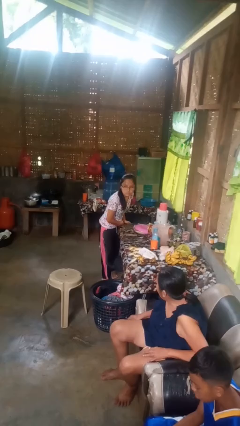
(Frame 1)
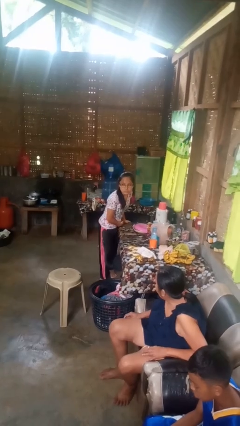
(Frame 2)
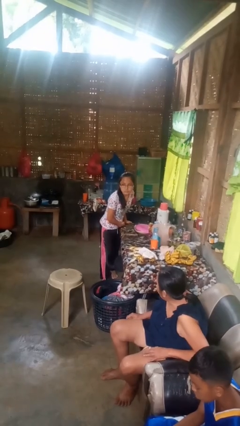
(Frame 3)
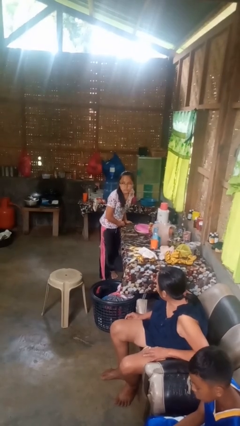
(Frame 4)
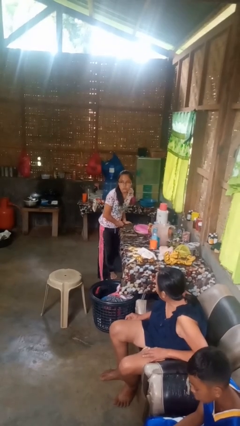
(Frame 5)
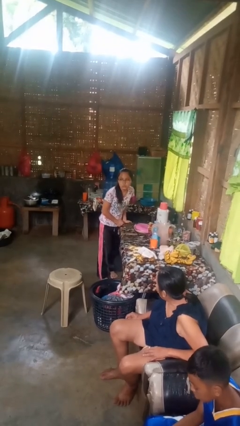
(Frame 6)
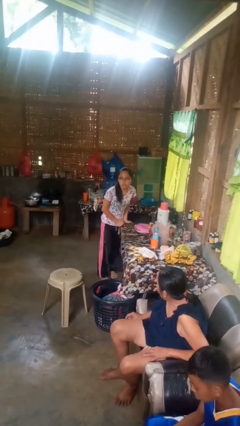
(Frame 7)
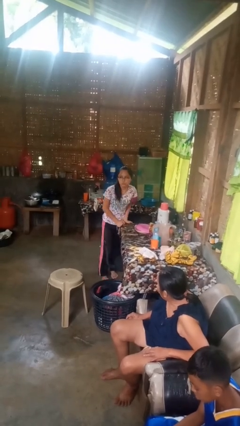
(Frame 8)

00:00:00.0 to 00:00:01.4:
person bumps into table

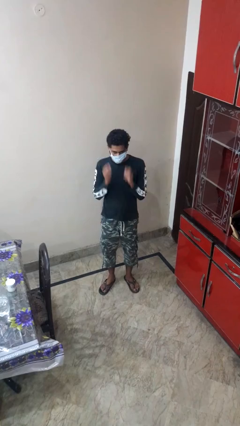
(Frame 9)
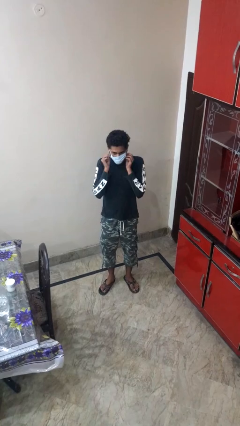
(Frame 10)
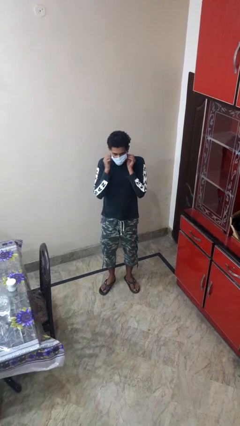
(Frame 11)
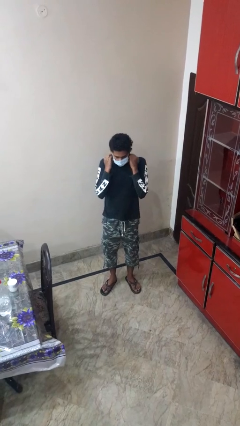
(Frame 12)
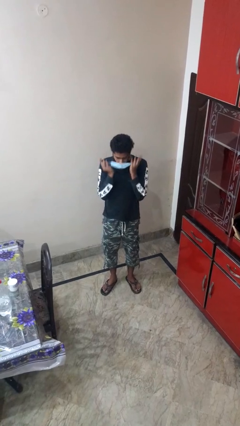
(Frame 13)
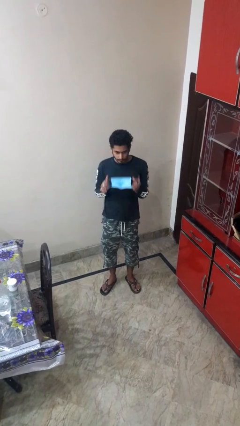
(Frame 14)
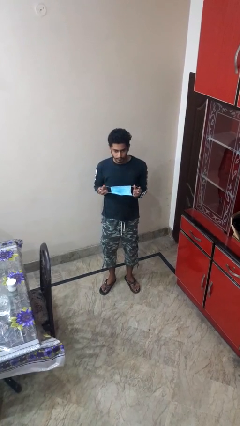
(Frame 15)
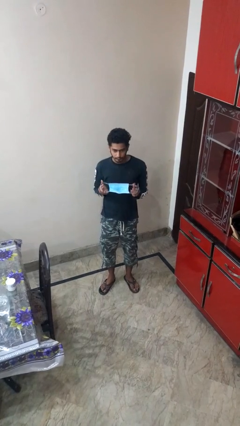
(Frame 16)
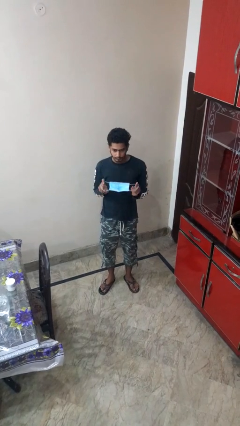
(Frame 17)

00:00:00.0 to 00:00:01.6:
person takes off facemask

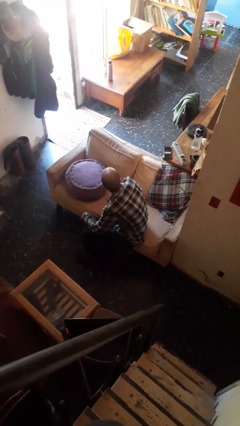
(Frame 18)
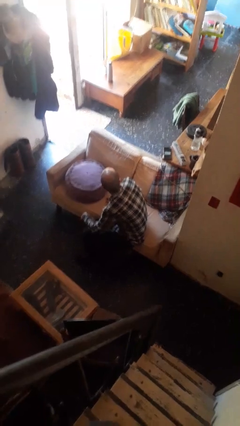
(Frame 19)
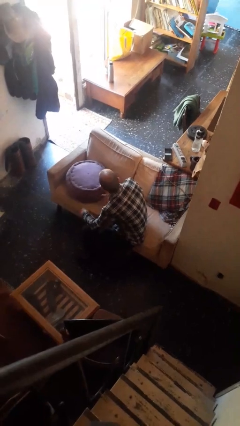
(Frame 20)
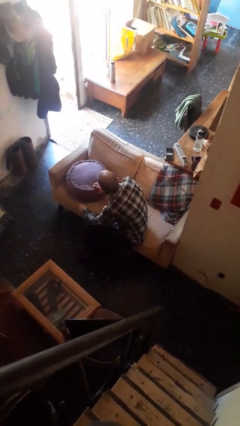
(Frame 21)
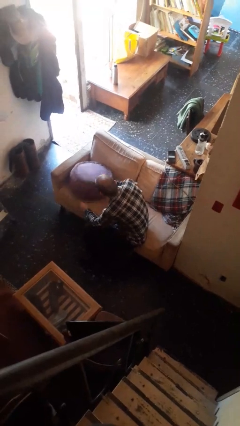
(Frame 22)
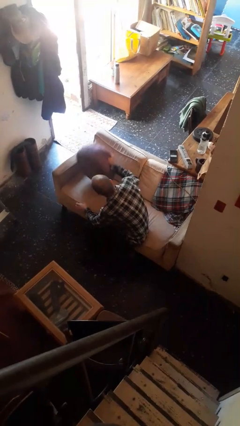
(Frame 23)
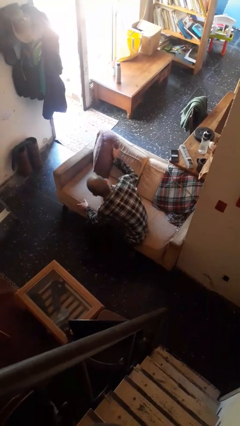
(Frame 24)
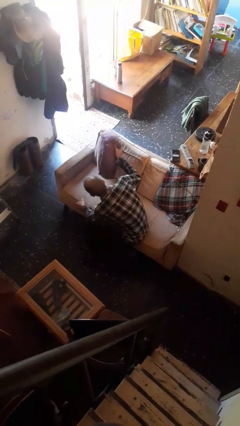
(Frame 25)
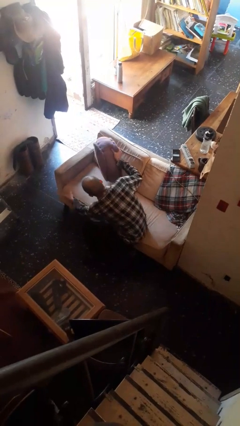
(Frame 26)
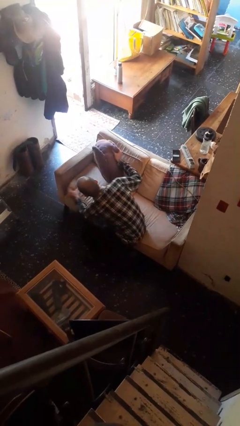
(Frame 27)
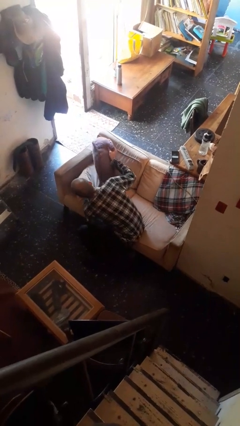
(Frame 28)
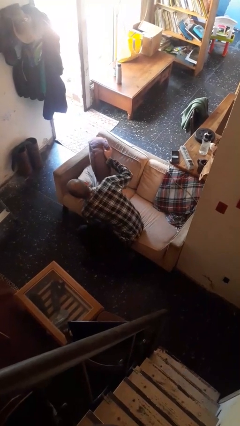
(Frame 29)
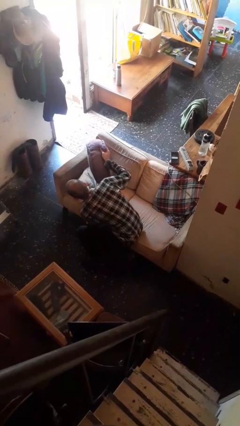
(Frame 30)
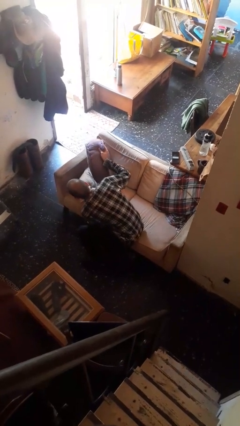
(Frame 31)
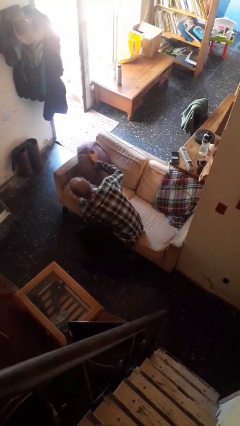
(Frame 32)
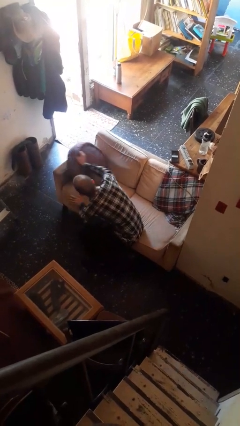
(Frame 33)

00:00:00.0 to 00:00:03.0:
person searches in couch

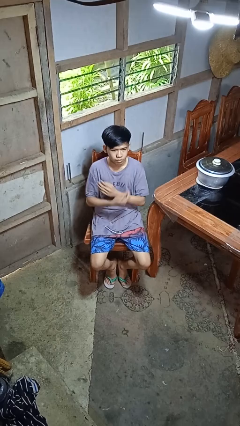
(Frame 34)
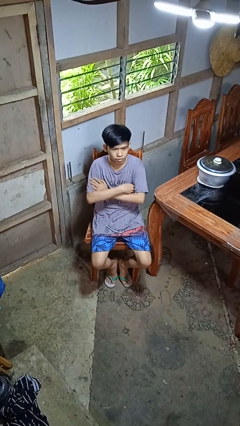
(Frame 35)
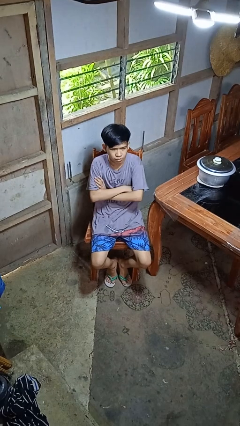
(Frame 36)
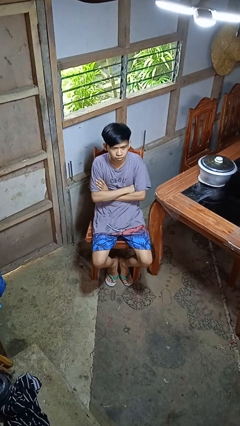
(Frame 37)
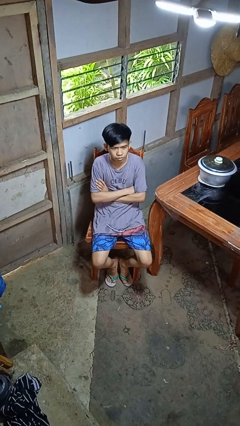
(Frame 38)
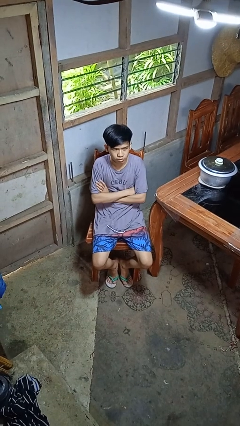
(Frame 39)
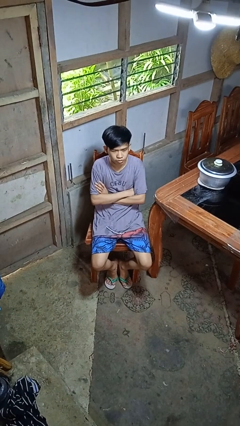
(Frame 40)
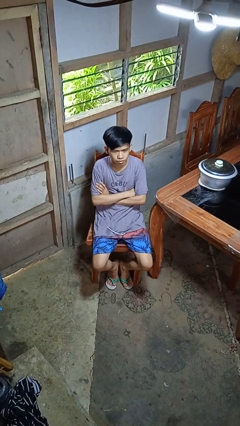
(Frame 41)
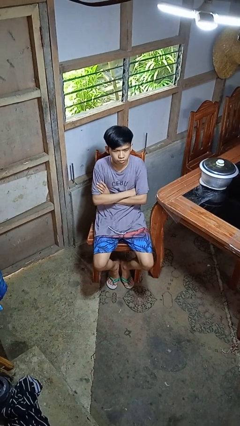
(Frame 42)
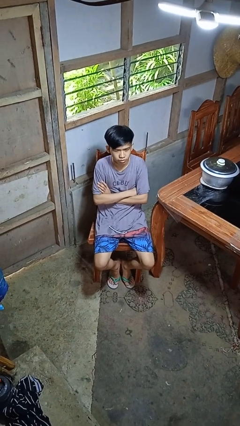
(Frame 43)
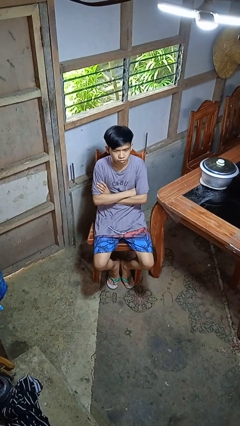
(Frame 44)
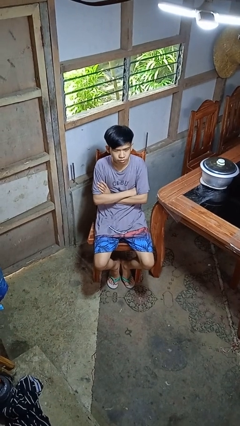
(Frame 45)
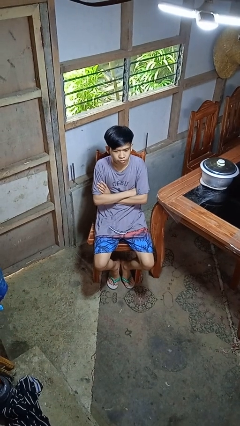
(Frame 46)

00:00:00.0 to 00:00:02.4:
person crosses arms

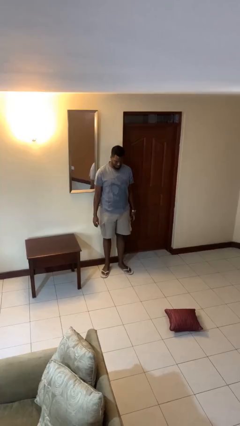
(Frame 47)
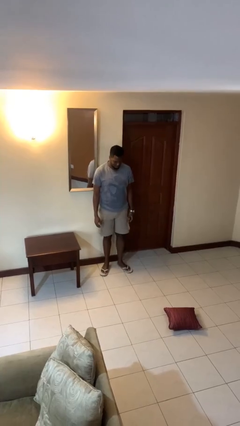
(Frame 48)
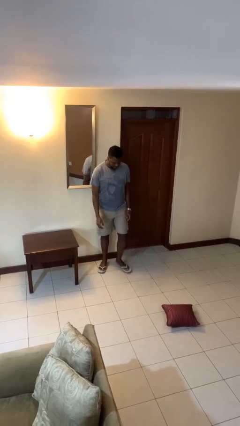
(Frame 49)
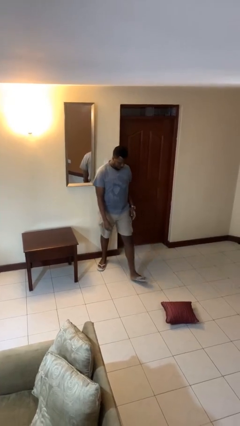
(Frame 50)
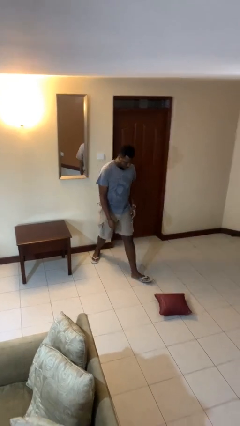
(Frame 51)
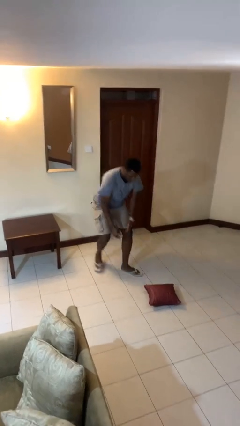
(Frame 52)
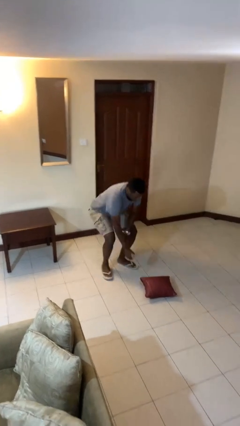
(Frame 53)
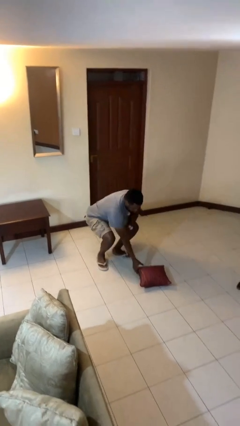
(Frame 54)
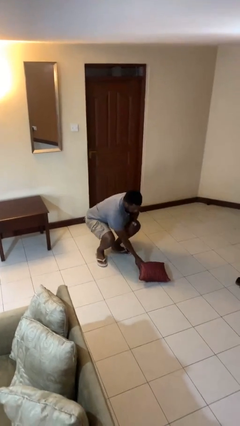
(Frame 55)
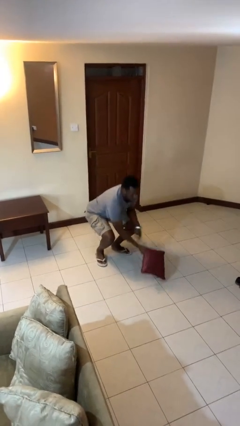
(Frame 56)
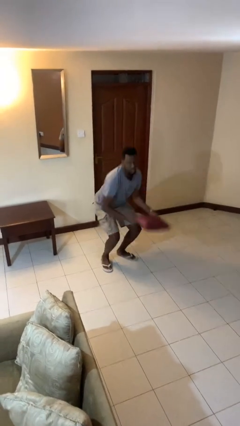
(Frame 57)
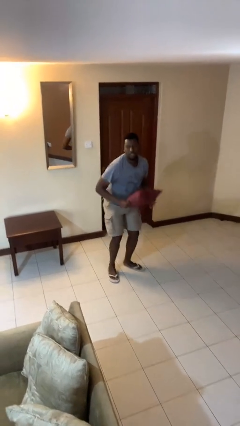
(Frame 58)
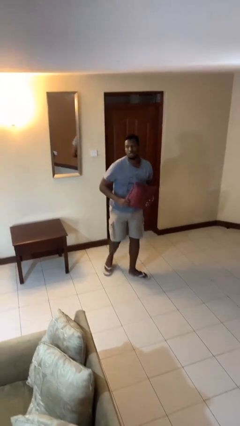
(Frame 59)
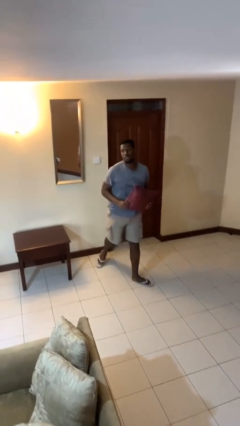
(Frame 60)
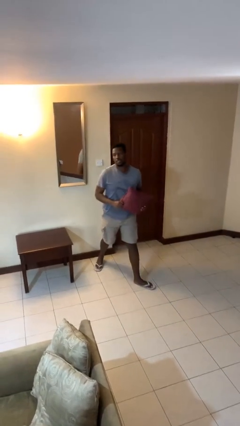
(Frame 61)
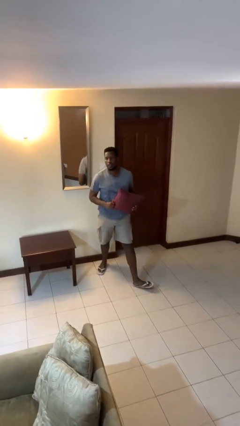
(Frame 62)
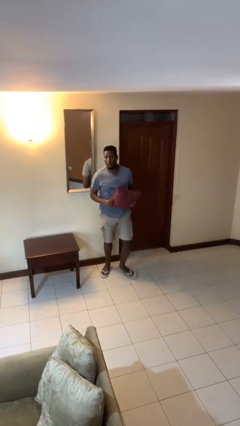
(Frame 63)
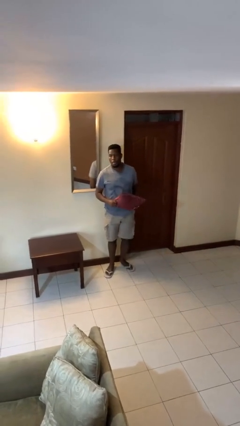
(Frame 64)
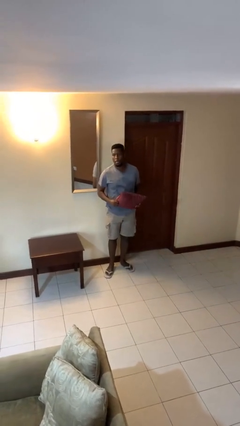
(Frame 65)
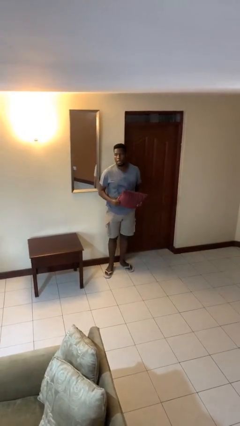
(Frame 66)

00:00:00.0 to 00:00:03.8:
person picks up object from floor

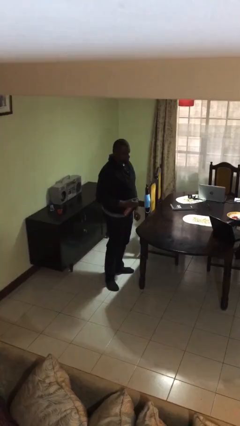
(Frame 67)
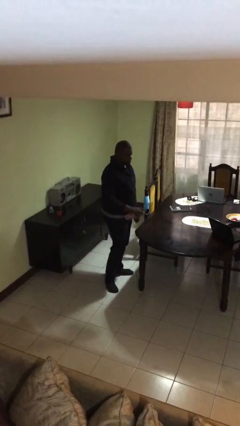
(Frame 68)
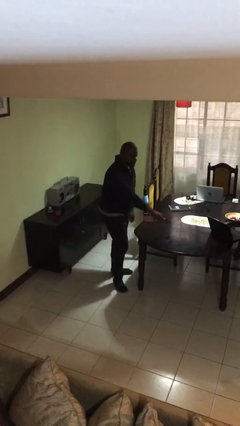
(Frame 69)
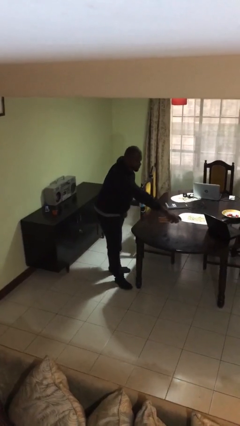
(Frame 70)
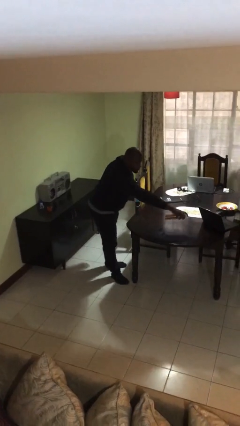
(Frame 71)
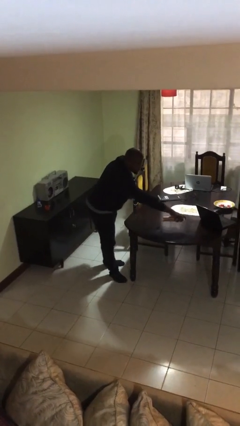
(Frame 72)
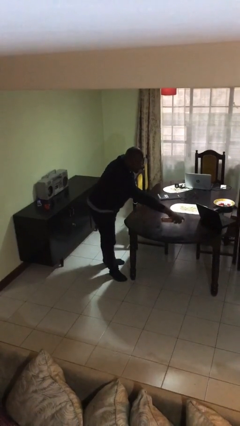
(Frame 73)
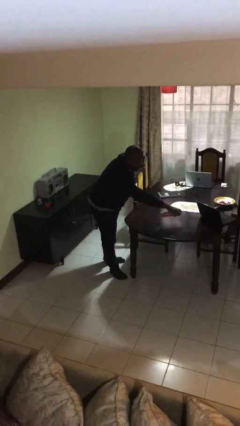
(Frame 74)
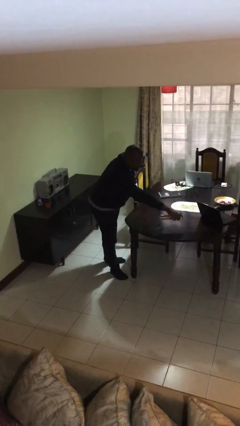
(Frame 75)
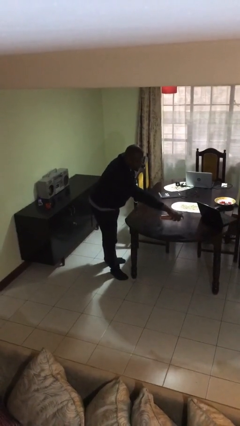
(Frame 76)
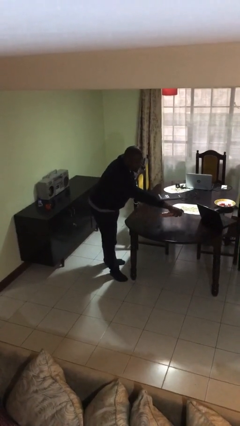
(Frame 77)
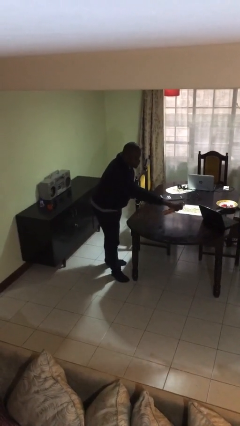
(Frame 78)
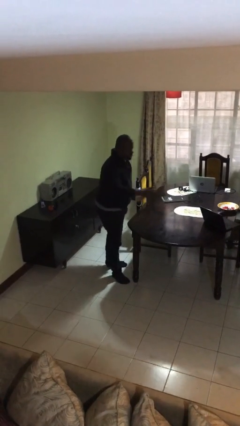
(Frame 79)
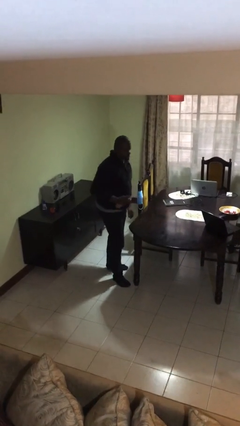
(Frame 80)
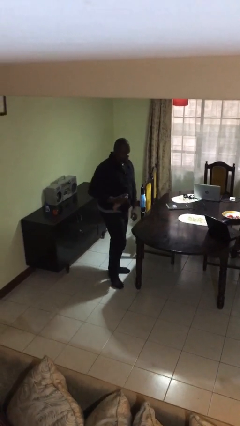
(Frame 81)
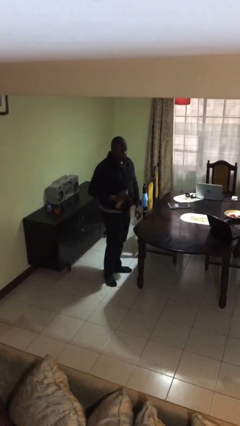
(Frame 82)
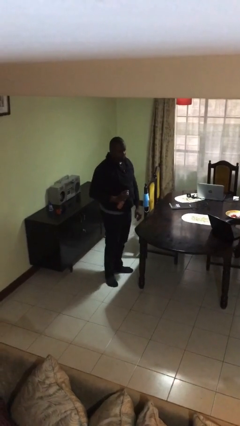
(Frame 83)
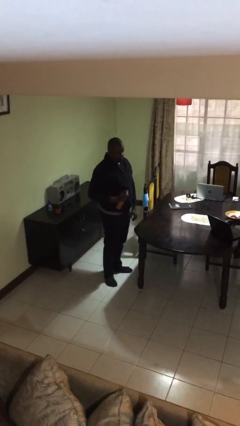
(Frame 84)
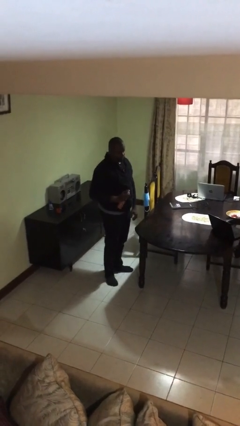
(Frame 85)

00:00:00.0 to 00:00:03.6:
person sprays from bottle

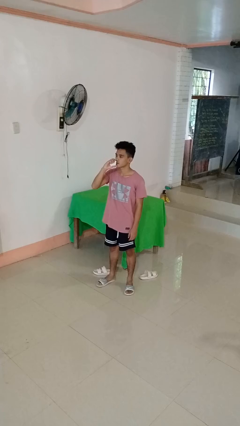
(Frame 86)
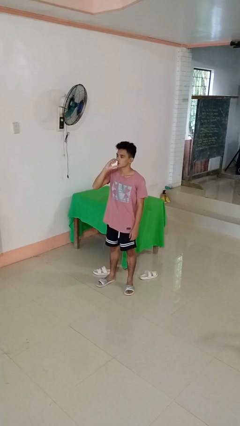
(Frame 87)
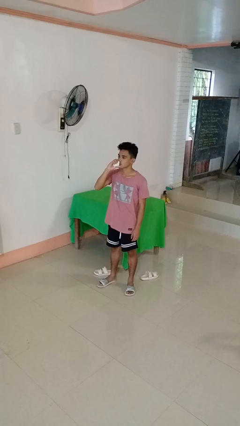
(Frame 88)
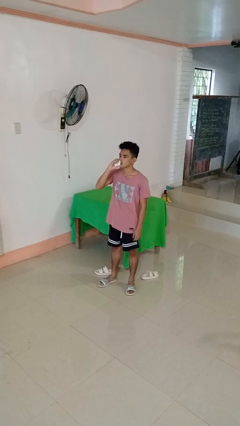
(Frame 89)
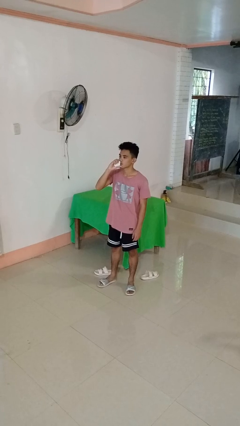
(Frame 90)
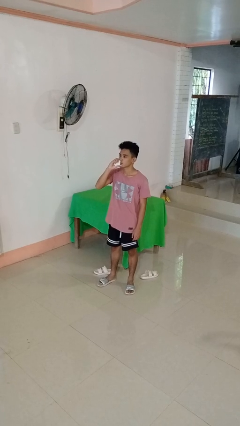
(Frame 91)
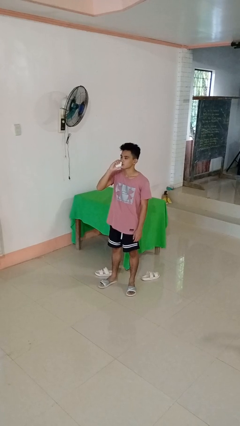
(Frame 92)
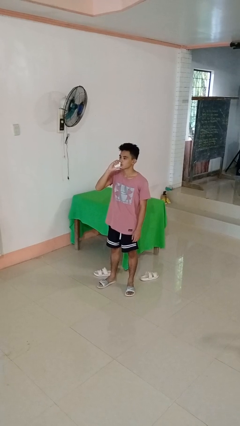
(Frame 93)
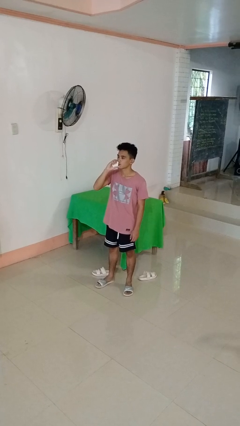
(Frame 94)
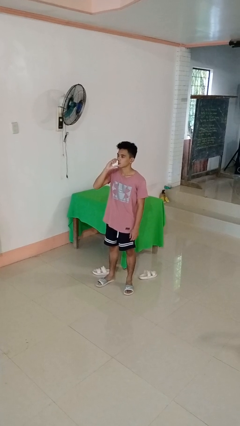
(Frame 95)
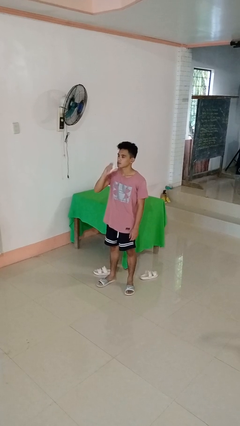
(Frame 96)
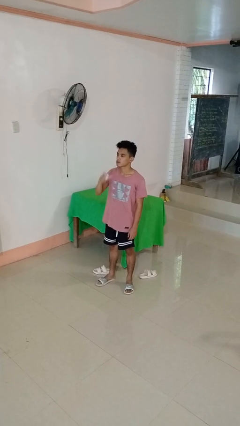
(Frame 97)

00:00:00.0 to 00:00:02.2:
person vapes
